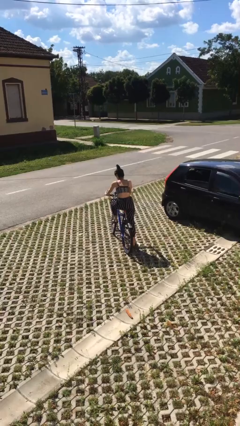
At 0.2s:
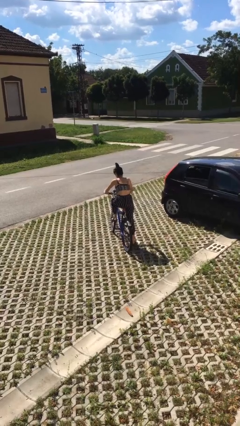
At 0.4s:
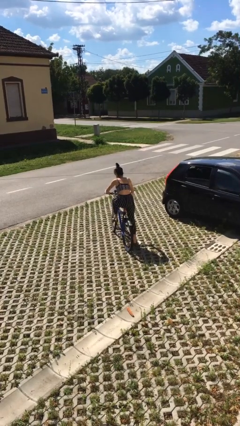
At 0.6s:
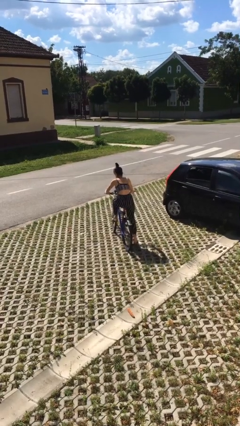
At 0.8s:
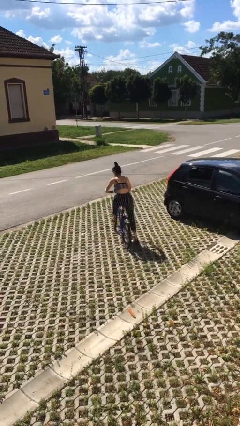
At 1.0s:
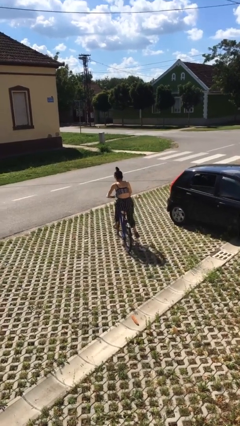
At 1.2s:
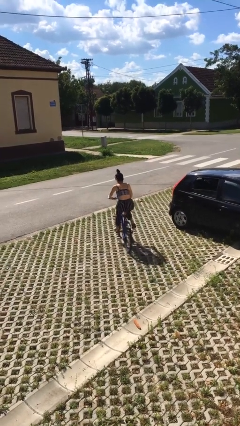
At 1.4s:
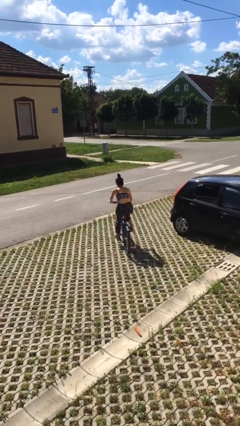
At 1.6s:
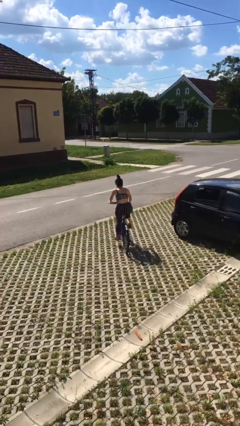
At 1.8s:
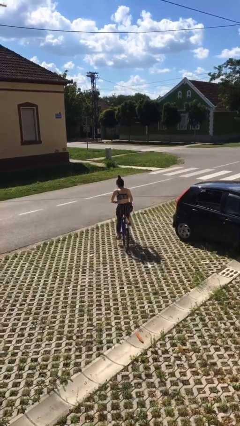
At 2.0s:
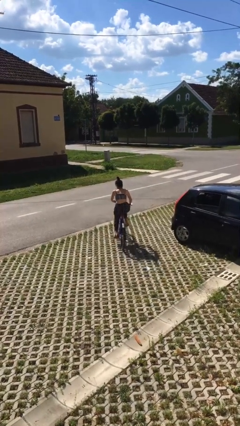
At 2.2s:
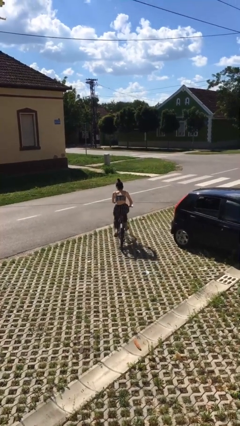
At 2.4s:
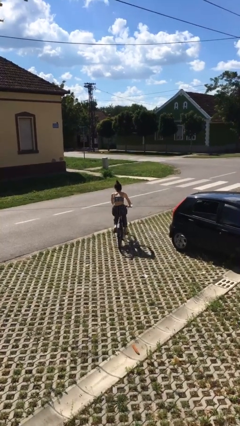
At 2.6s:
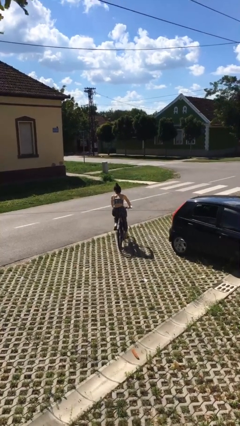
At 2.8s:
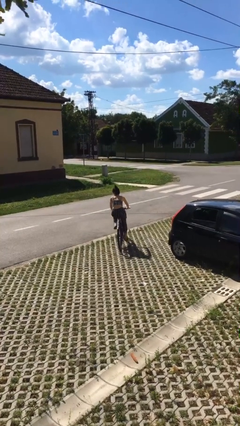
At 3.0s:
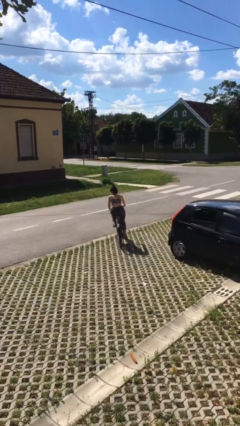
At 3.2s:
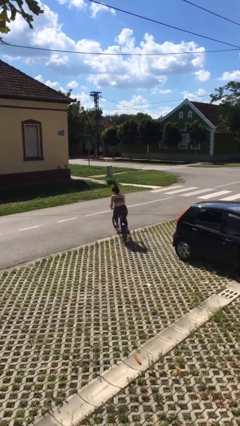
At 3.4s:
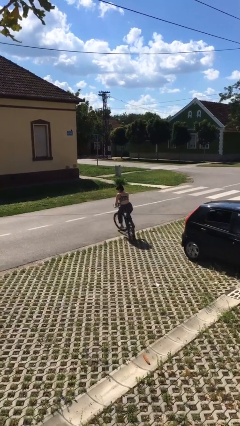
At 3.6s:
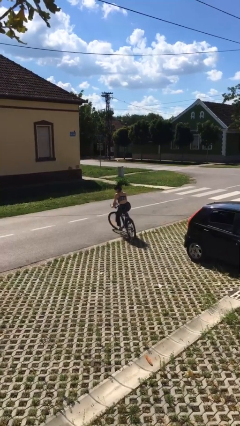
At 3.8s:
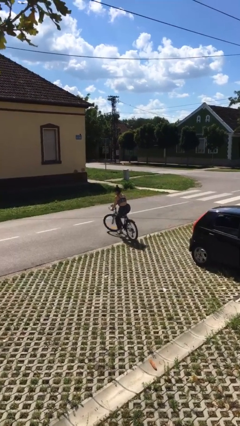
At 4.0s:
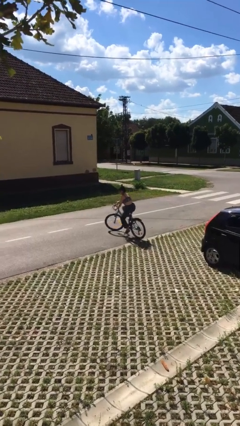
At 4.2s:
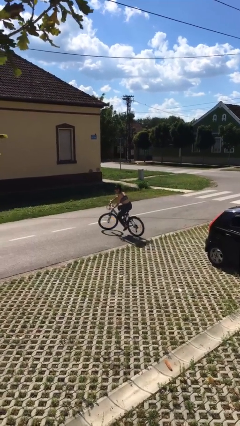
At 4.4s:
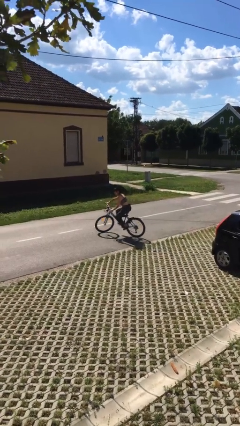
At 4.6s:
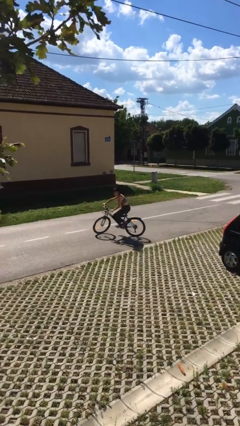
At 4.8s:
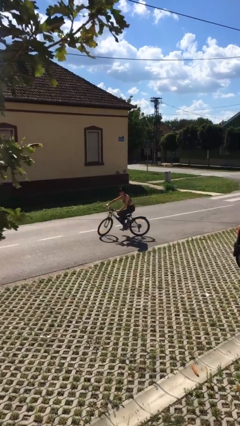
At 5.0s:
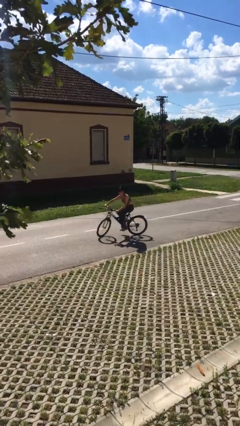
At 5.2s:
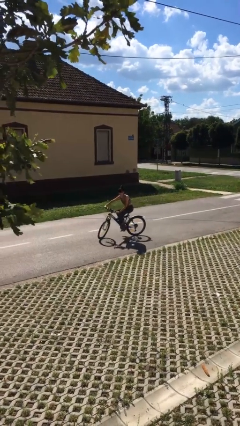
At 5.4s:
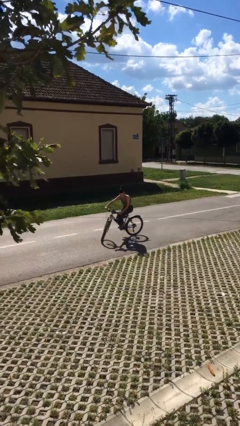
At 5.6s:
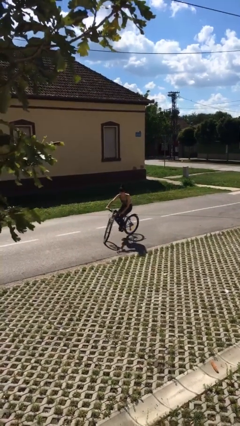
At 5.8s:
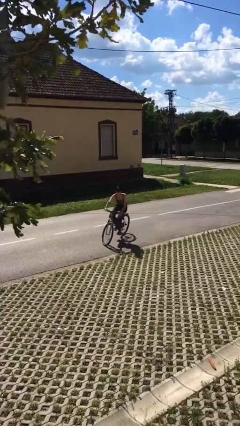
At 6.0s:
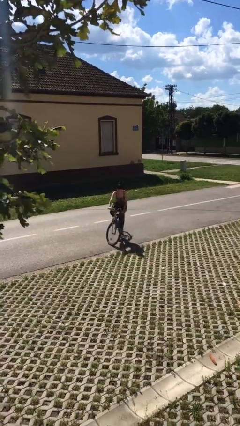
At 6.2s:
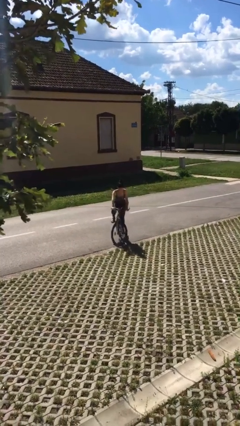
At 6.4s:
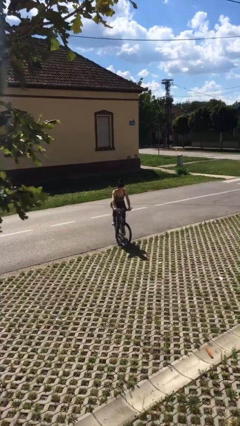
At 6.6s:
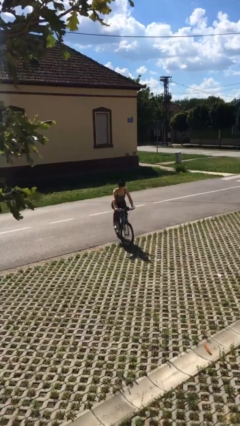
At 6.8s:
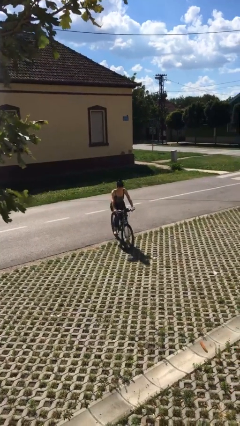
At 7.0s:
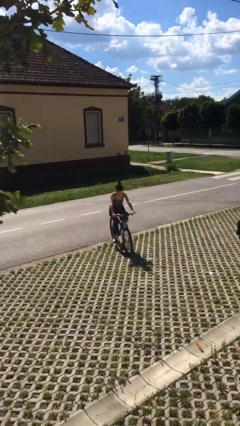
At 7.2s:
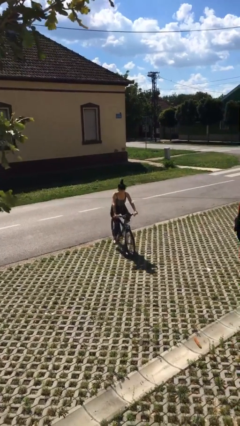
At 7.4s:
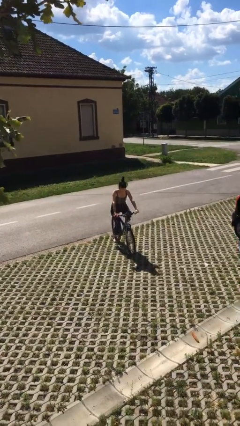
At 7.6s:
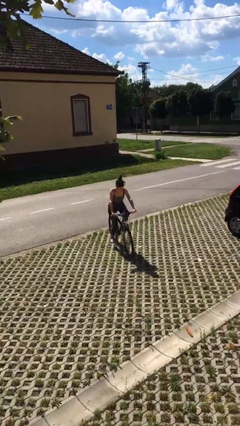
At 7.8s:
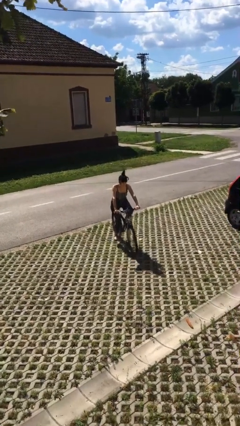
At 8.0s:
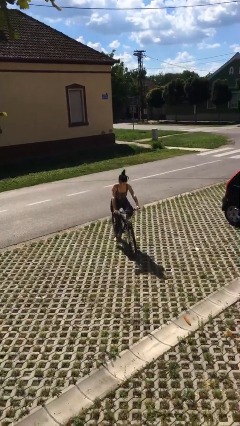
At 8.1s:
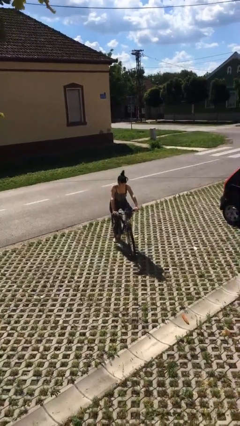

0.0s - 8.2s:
person rides bicycle

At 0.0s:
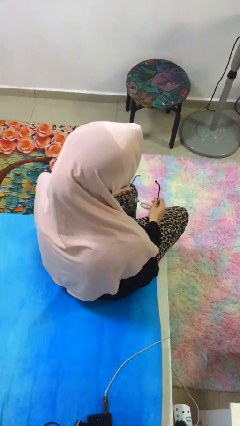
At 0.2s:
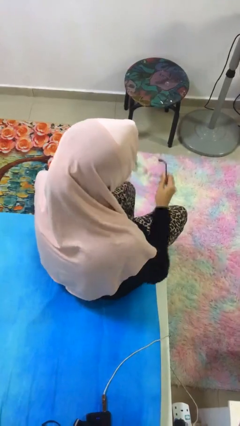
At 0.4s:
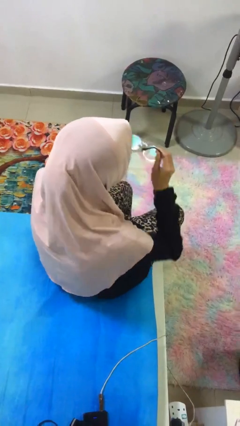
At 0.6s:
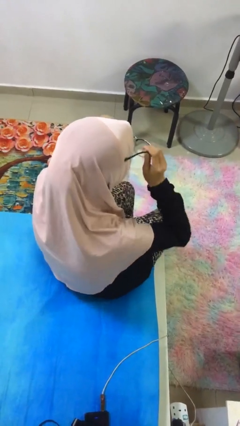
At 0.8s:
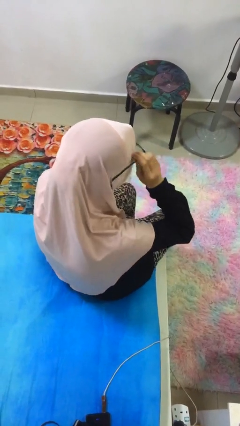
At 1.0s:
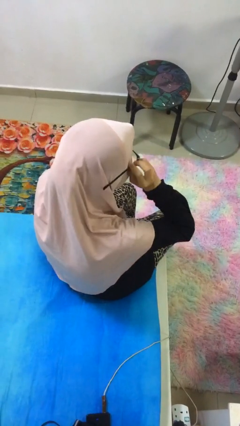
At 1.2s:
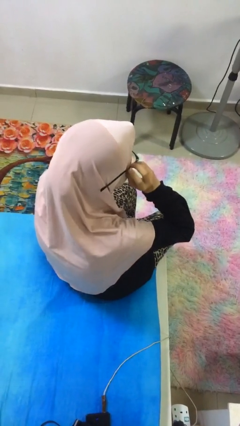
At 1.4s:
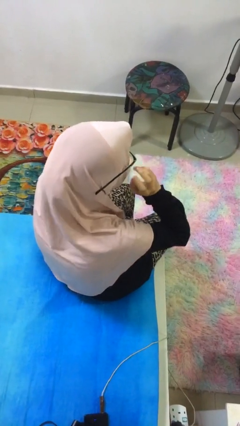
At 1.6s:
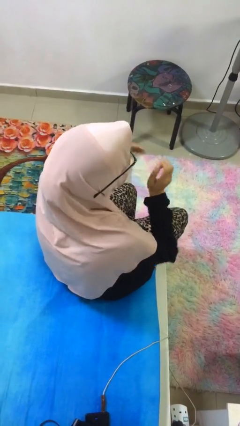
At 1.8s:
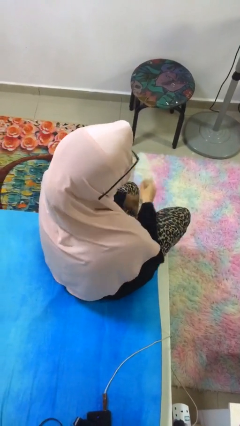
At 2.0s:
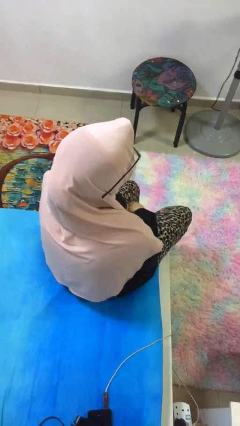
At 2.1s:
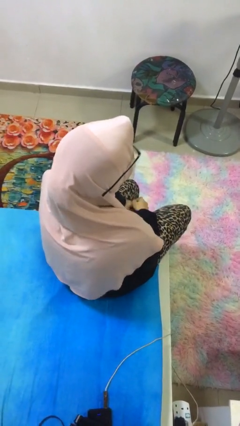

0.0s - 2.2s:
person puts on glasses

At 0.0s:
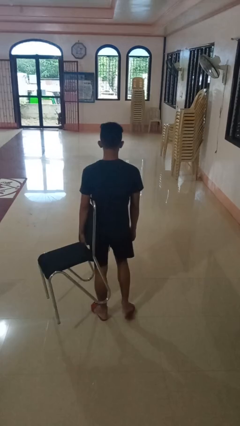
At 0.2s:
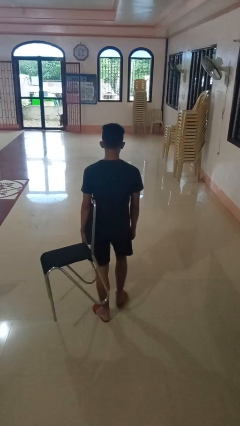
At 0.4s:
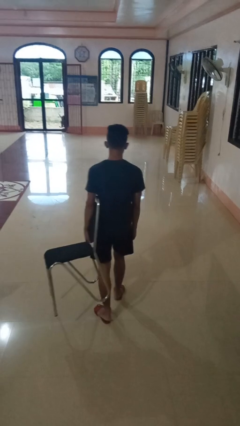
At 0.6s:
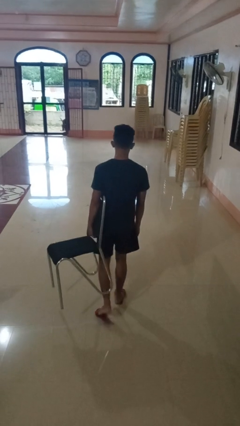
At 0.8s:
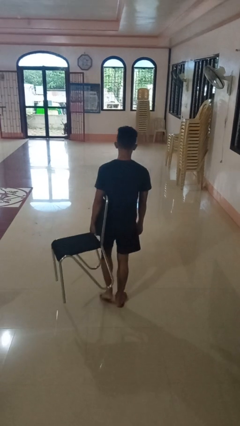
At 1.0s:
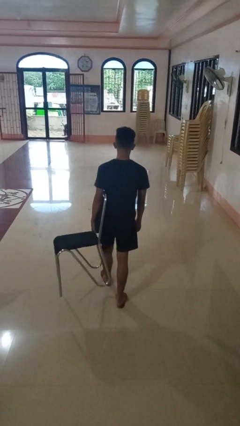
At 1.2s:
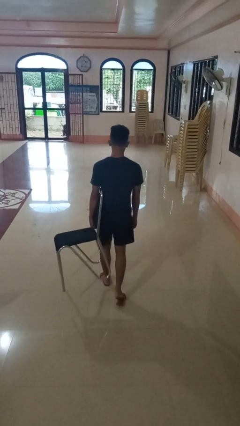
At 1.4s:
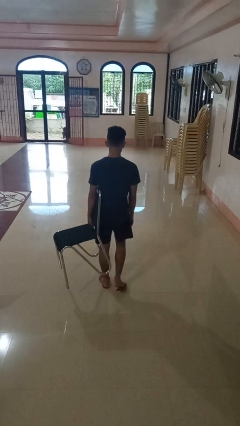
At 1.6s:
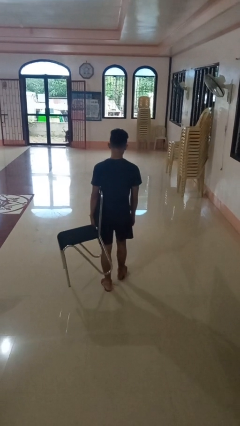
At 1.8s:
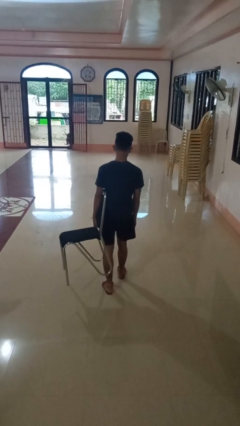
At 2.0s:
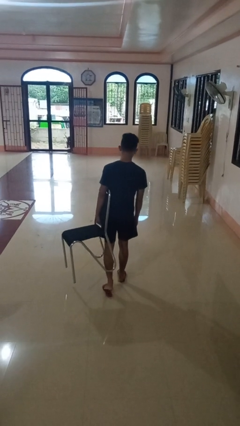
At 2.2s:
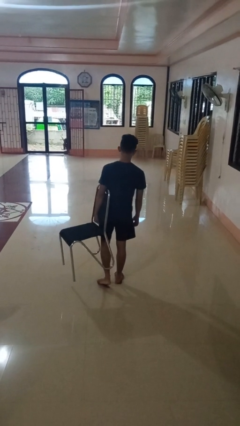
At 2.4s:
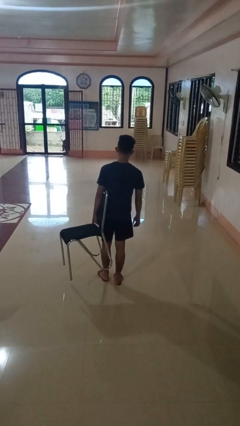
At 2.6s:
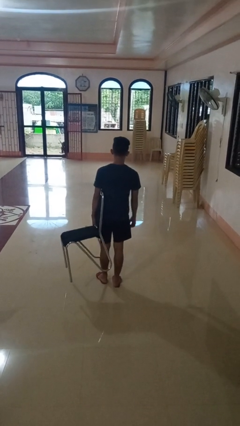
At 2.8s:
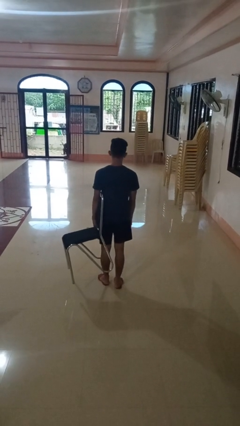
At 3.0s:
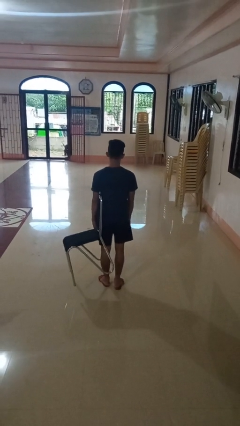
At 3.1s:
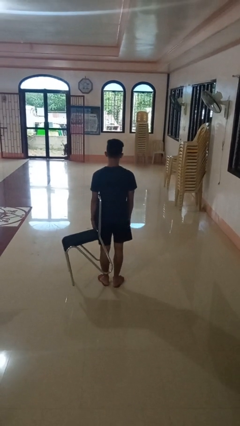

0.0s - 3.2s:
person carries furniture

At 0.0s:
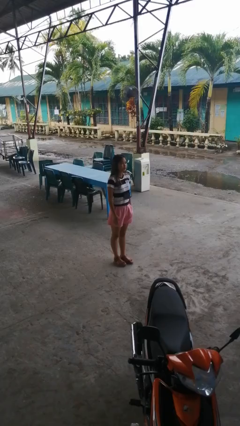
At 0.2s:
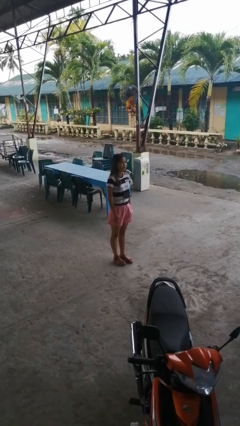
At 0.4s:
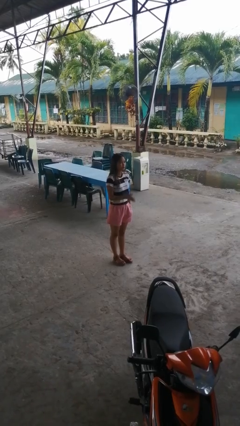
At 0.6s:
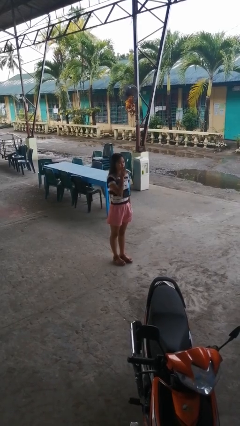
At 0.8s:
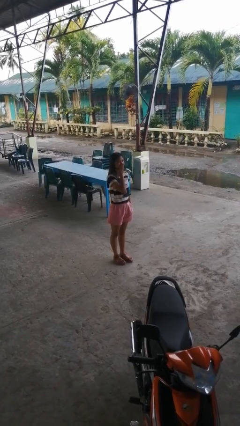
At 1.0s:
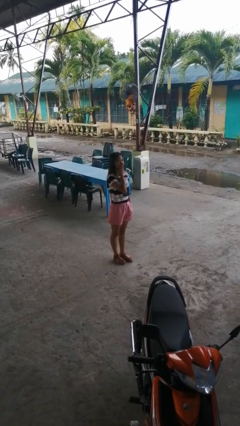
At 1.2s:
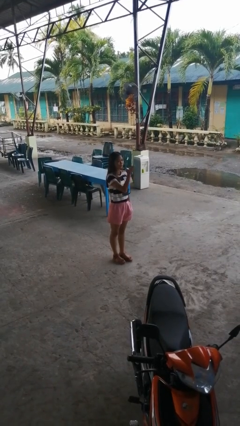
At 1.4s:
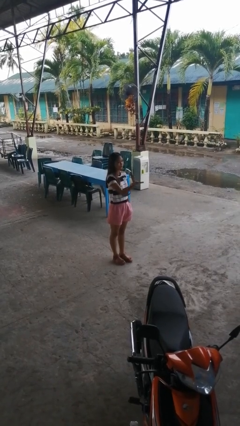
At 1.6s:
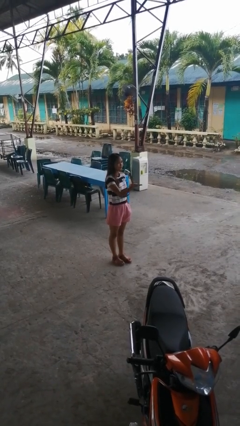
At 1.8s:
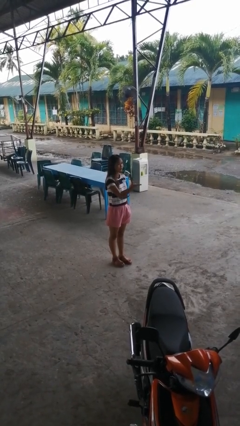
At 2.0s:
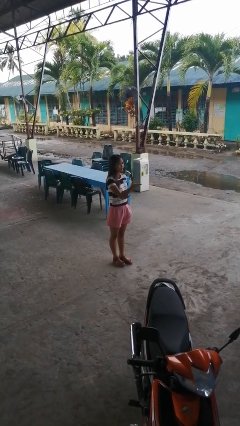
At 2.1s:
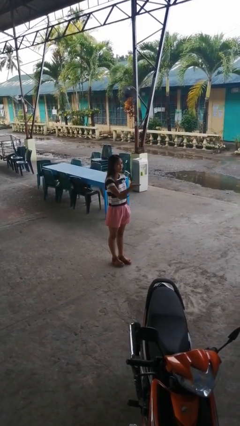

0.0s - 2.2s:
person gestures blow kiss

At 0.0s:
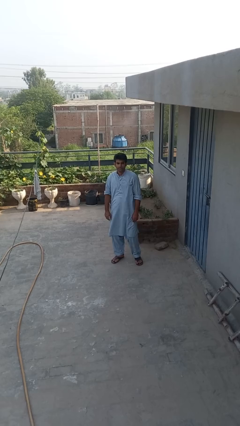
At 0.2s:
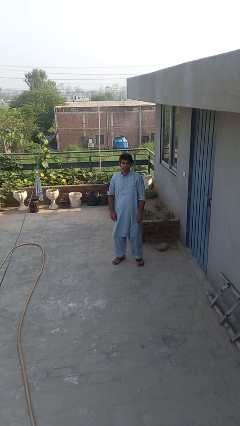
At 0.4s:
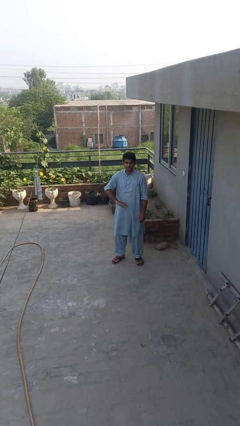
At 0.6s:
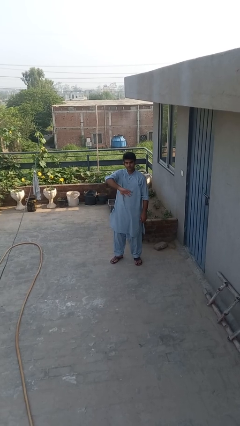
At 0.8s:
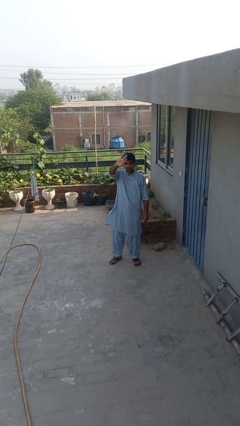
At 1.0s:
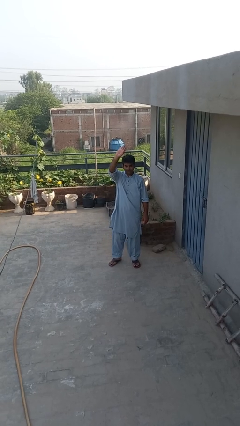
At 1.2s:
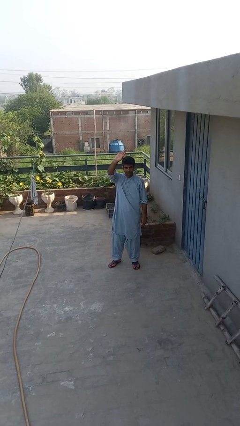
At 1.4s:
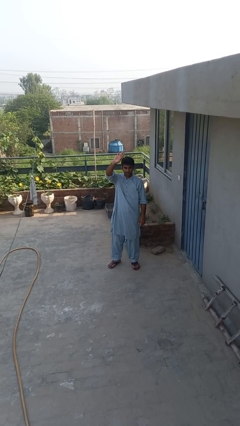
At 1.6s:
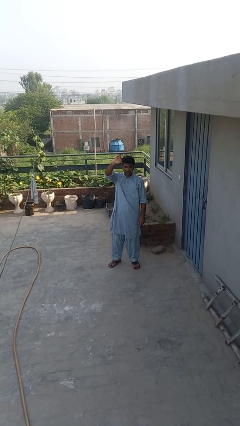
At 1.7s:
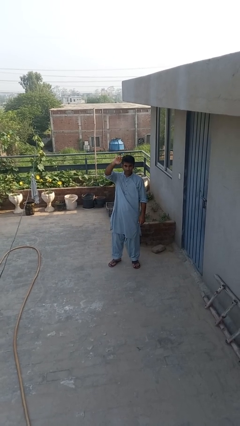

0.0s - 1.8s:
person gestures swipe up

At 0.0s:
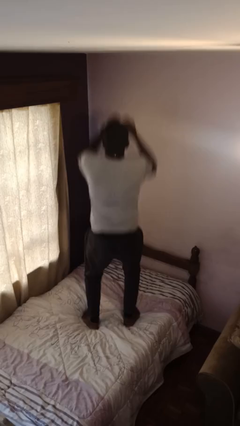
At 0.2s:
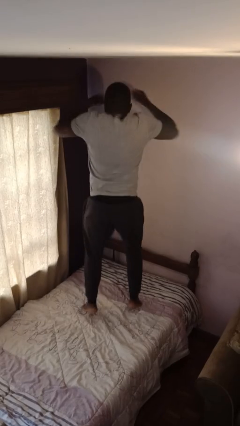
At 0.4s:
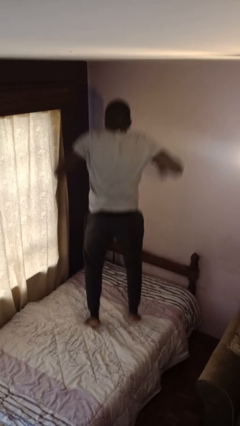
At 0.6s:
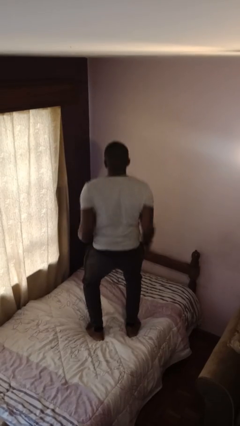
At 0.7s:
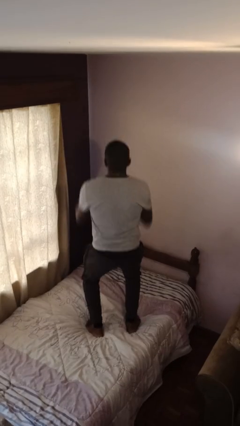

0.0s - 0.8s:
person jumps on bed
